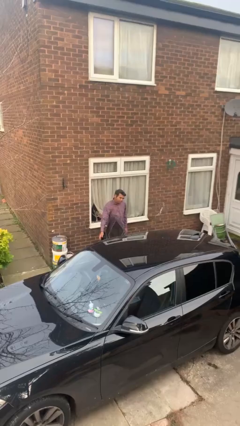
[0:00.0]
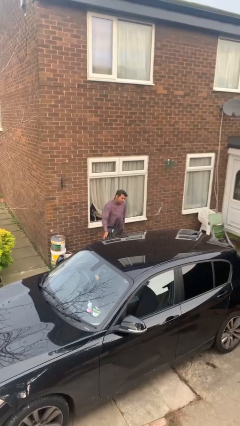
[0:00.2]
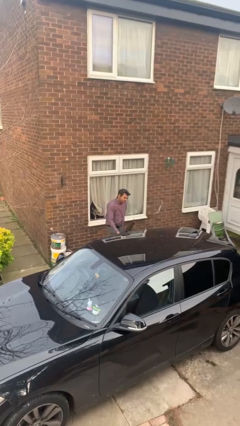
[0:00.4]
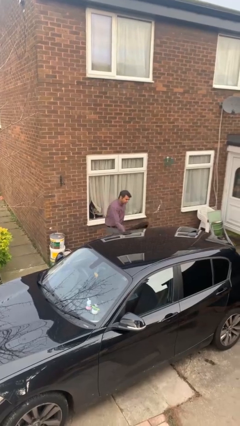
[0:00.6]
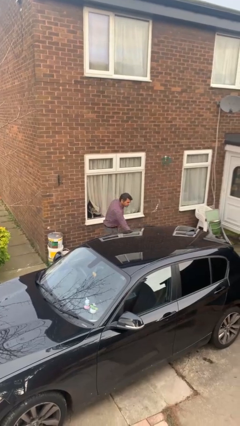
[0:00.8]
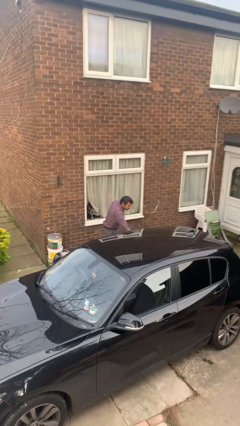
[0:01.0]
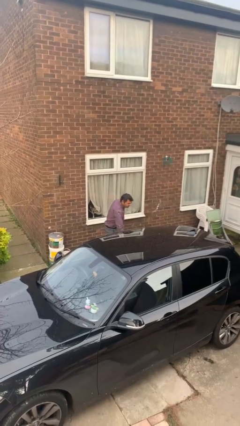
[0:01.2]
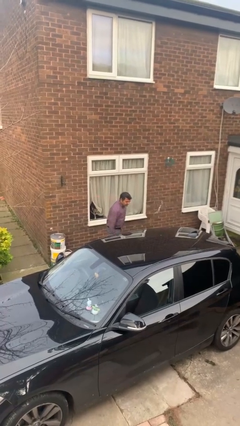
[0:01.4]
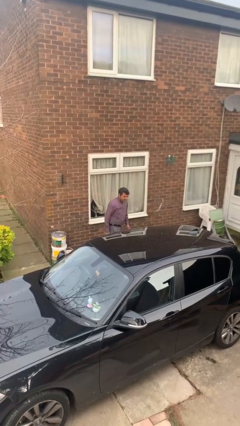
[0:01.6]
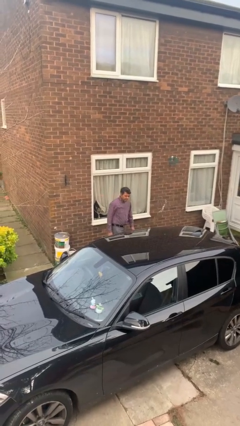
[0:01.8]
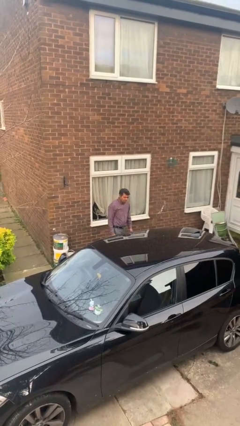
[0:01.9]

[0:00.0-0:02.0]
person closes car door

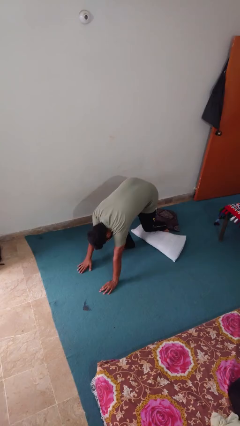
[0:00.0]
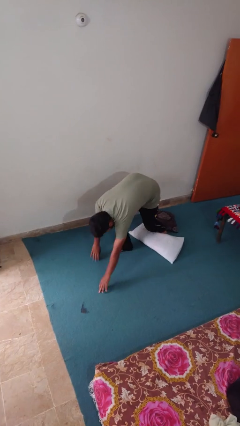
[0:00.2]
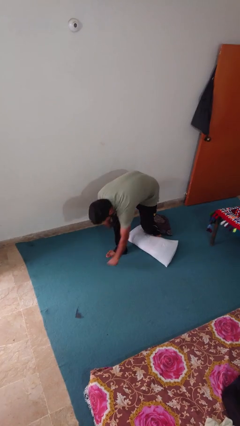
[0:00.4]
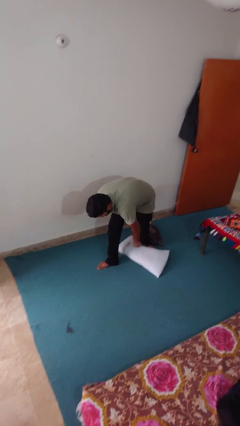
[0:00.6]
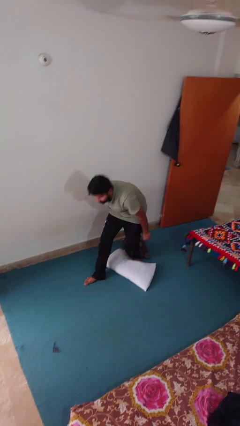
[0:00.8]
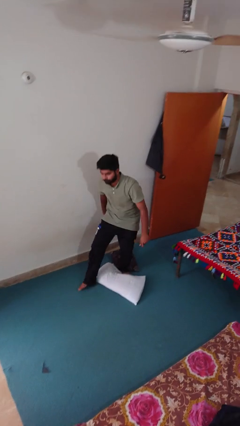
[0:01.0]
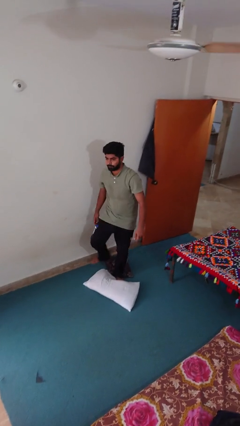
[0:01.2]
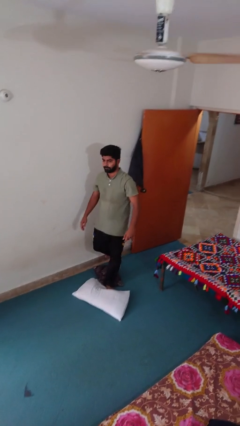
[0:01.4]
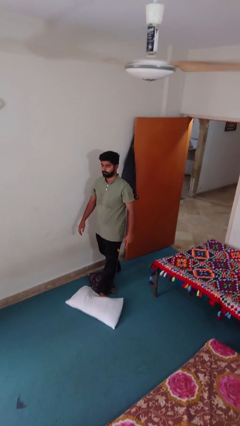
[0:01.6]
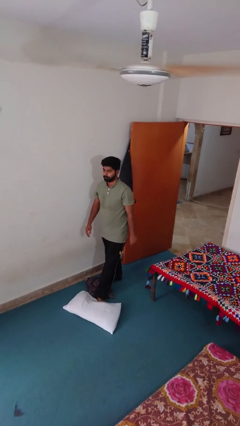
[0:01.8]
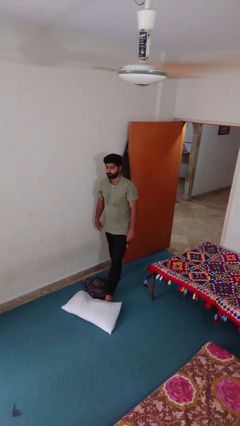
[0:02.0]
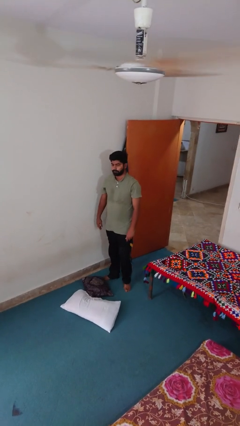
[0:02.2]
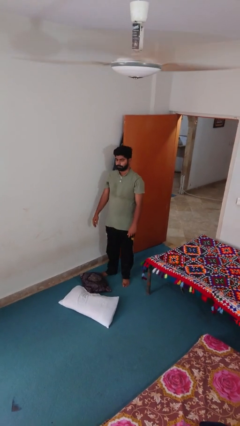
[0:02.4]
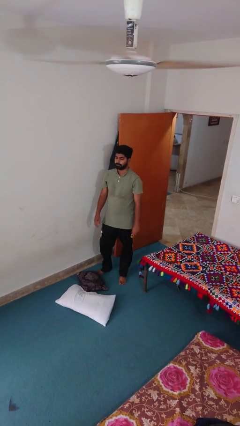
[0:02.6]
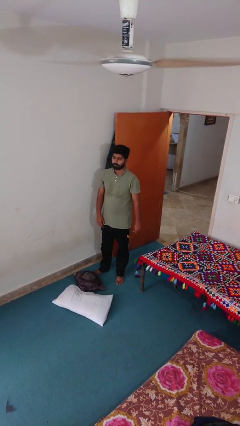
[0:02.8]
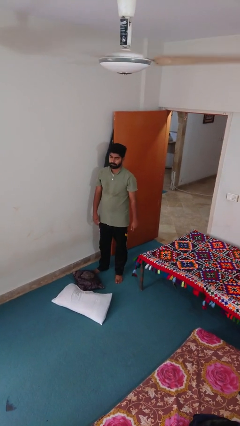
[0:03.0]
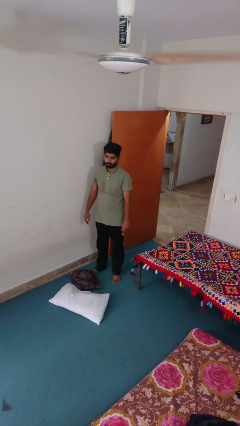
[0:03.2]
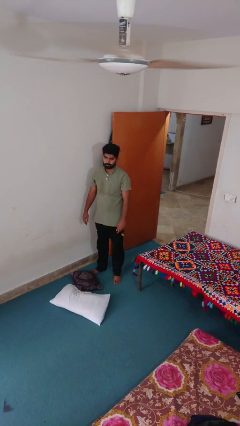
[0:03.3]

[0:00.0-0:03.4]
person stands up from floor

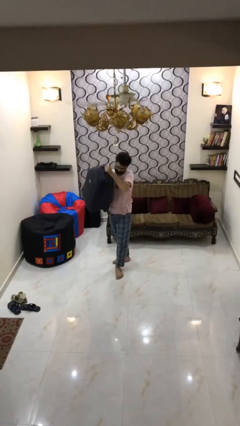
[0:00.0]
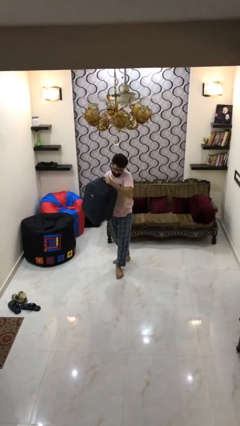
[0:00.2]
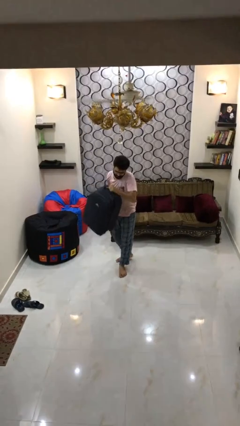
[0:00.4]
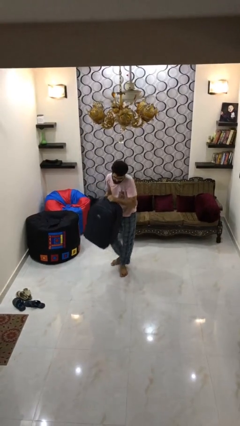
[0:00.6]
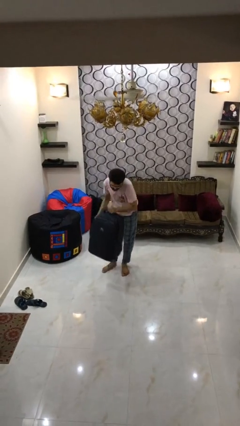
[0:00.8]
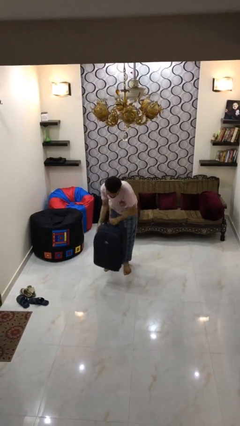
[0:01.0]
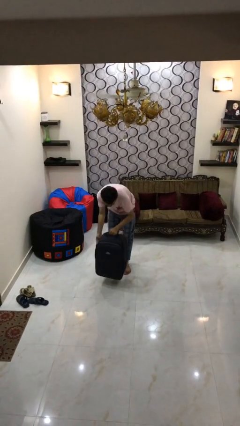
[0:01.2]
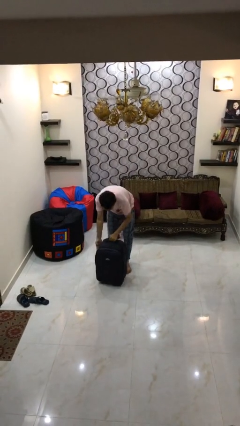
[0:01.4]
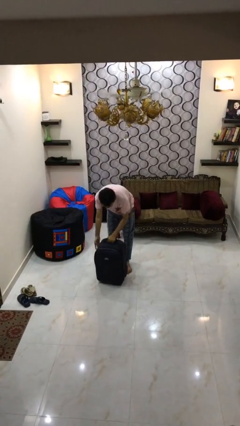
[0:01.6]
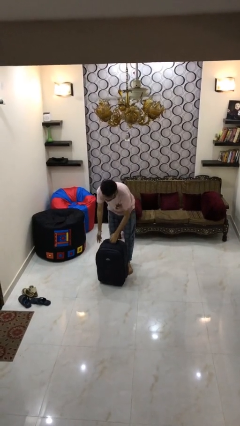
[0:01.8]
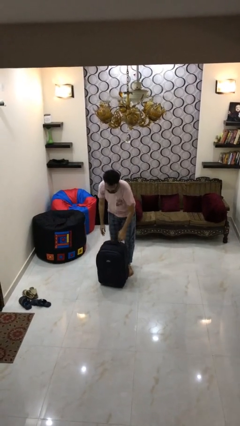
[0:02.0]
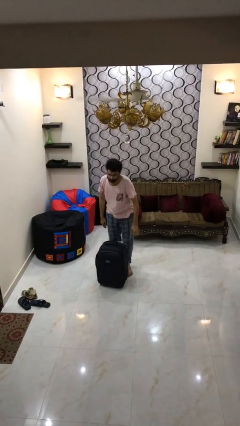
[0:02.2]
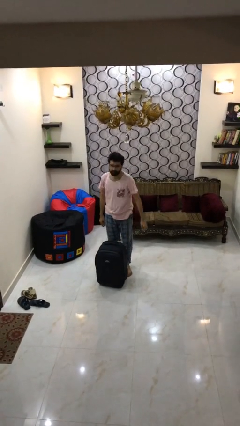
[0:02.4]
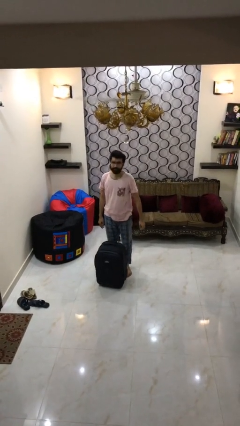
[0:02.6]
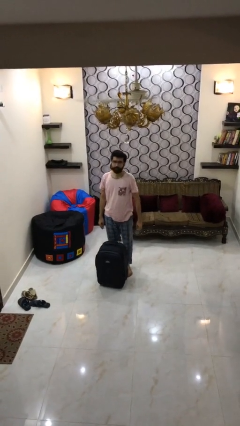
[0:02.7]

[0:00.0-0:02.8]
person puts down object on floor

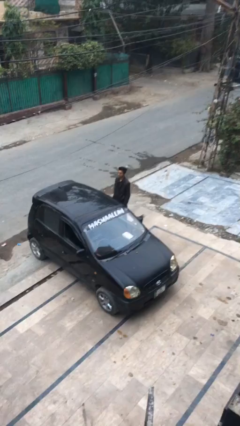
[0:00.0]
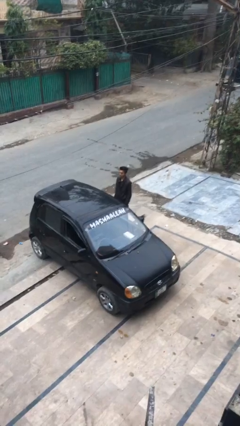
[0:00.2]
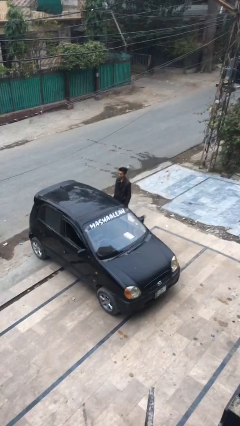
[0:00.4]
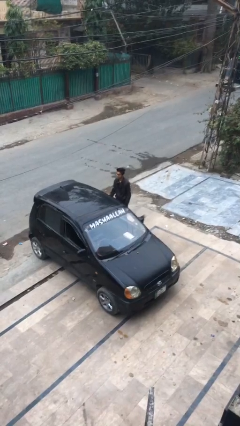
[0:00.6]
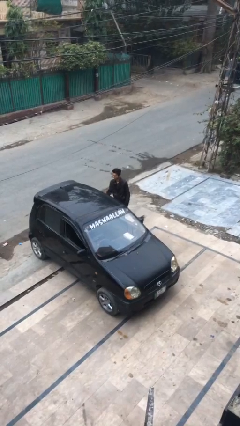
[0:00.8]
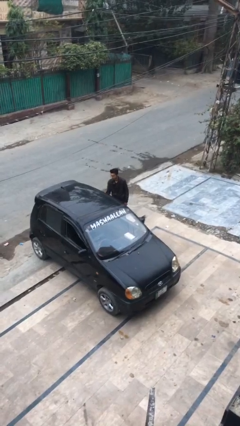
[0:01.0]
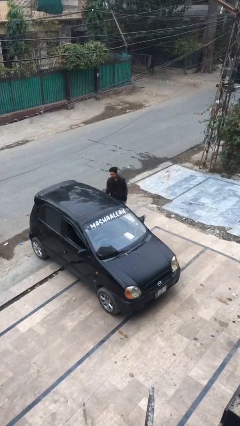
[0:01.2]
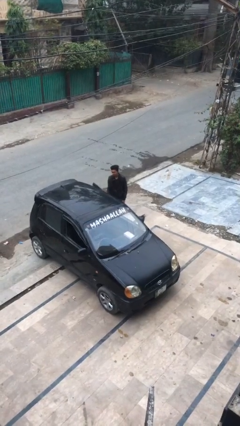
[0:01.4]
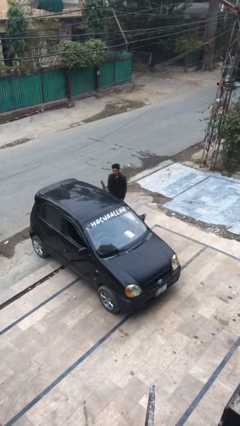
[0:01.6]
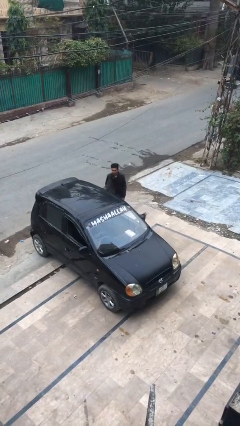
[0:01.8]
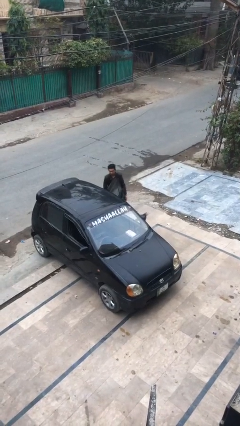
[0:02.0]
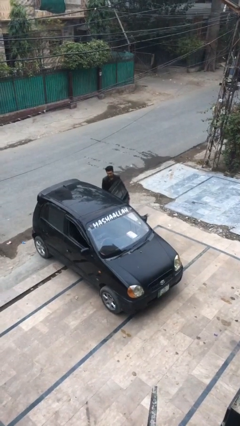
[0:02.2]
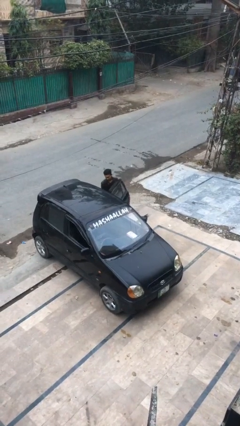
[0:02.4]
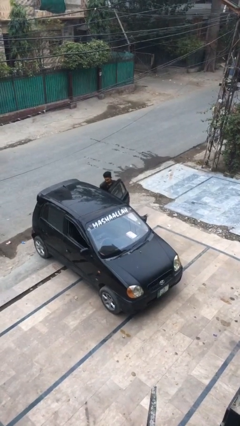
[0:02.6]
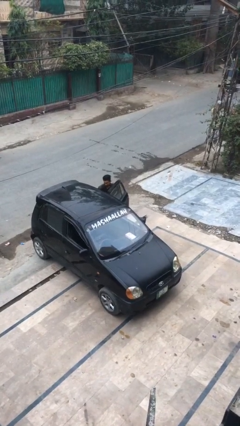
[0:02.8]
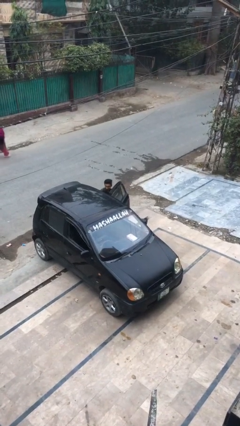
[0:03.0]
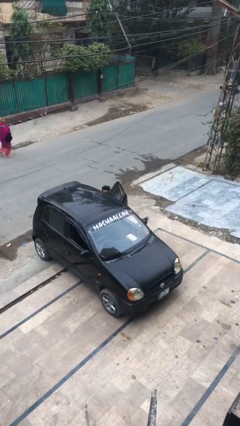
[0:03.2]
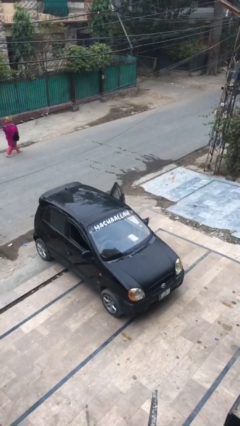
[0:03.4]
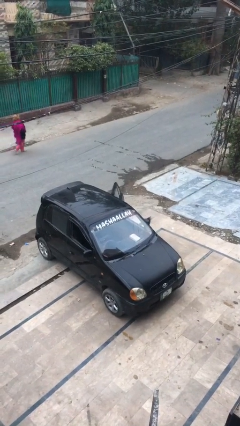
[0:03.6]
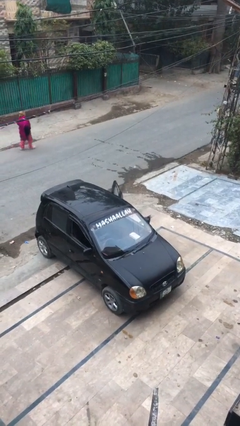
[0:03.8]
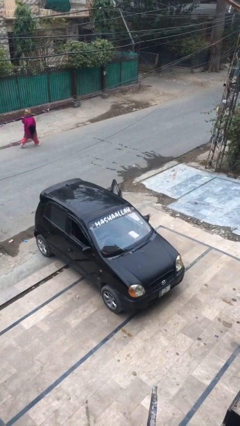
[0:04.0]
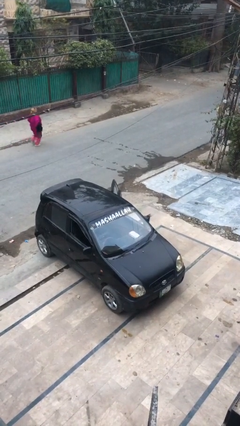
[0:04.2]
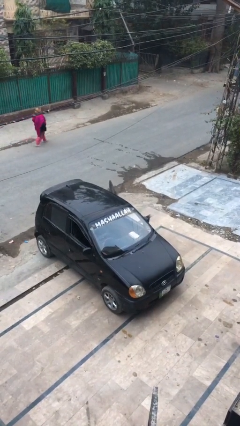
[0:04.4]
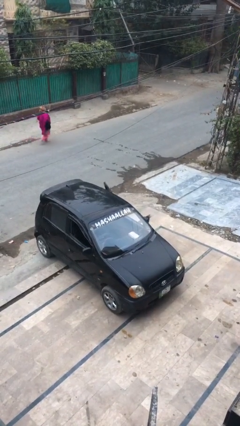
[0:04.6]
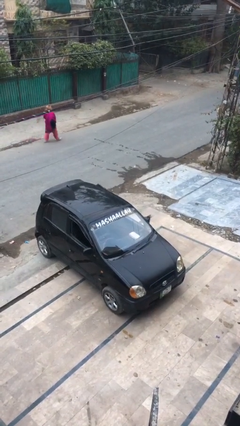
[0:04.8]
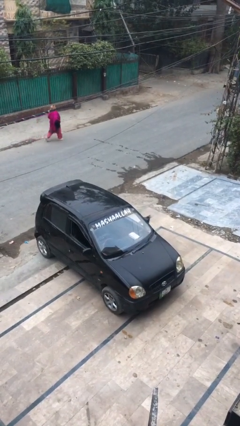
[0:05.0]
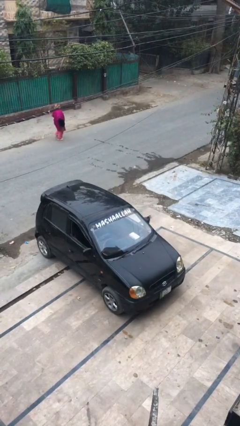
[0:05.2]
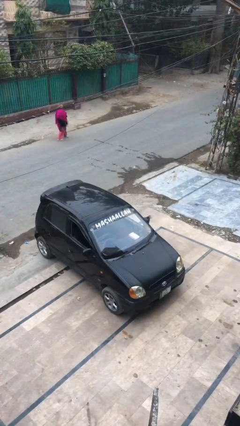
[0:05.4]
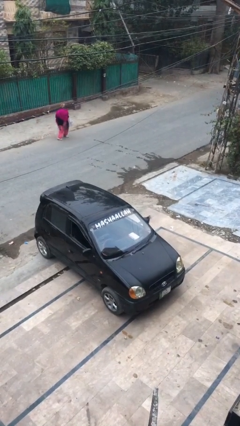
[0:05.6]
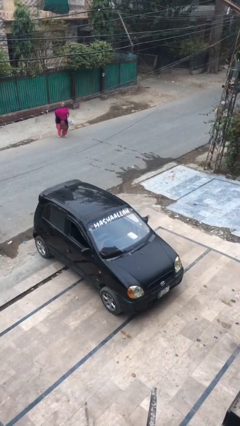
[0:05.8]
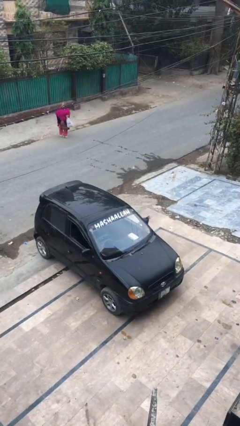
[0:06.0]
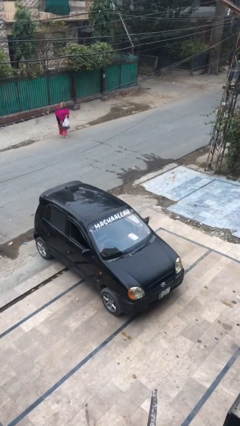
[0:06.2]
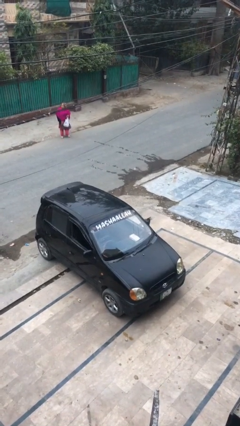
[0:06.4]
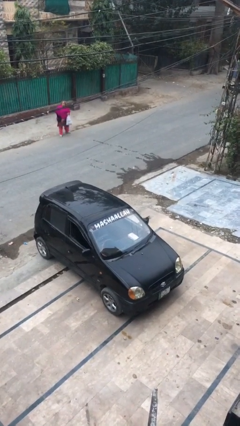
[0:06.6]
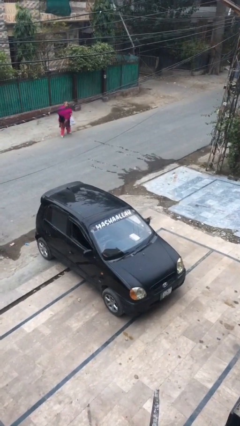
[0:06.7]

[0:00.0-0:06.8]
person enters car

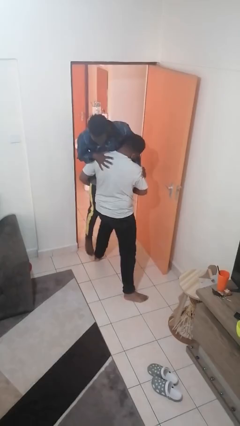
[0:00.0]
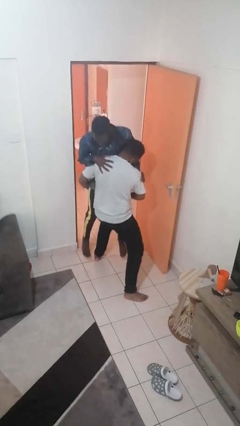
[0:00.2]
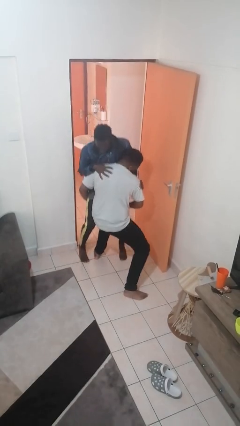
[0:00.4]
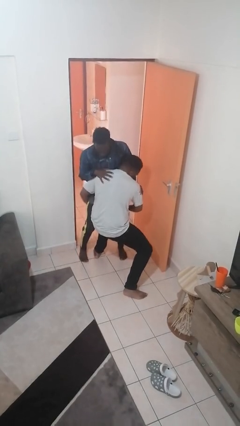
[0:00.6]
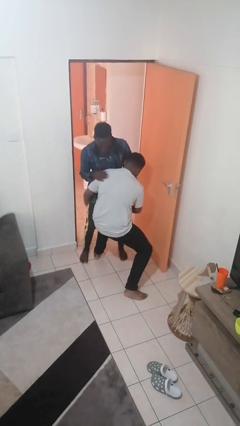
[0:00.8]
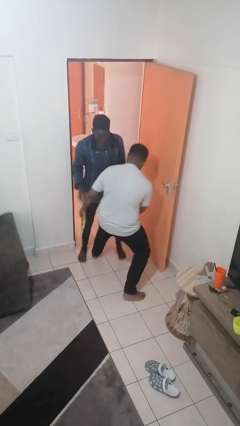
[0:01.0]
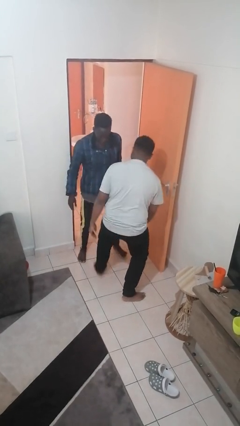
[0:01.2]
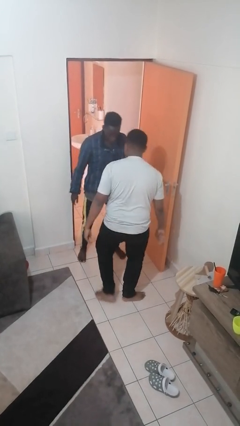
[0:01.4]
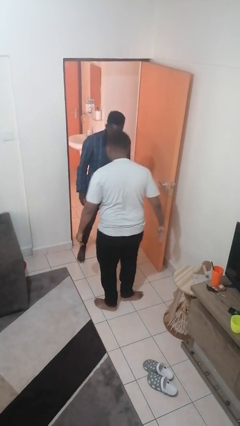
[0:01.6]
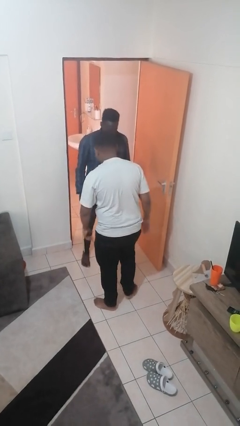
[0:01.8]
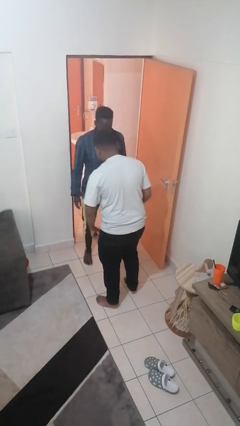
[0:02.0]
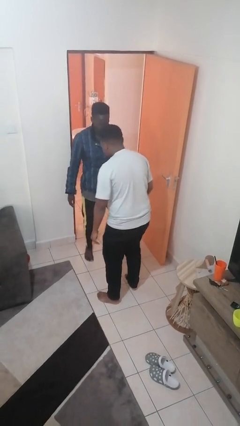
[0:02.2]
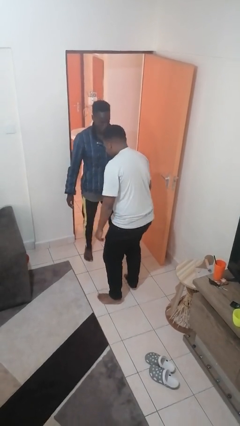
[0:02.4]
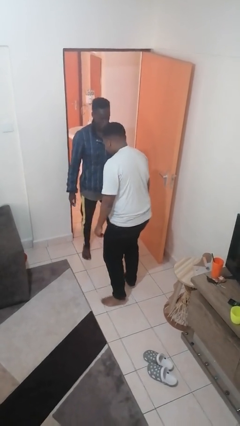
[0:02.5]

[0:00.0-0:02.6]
person puts down person
